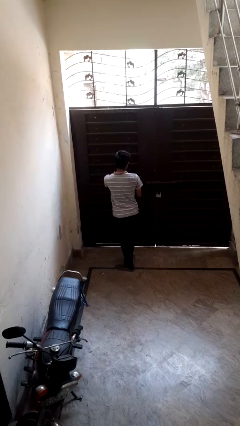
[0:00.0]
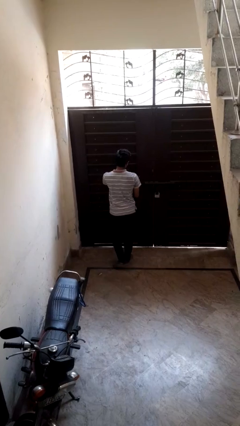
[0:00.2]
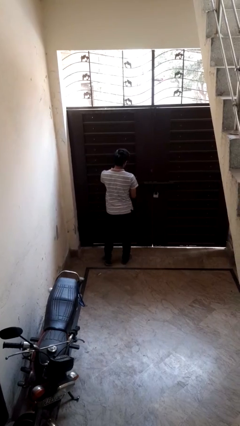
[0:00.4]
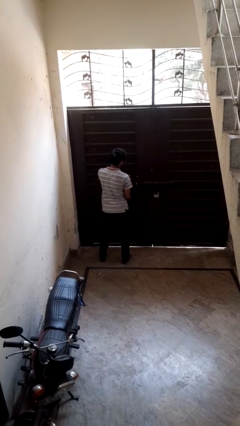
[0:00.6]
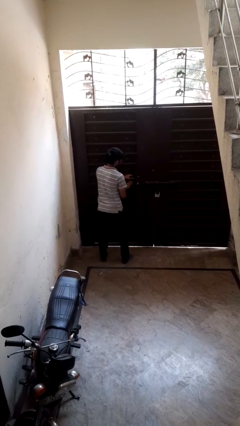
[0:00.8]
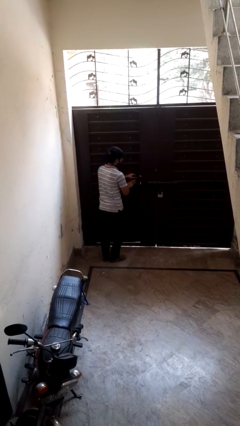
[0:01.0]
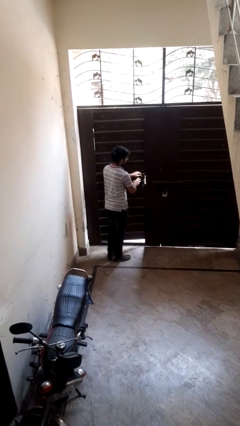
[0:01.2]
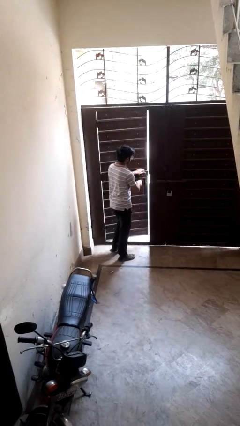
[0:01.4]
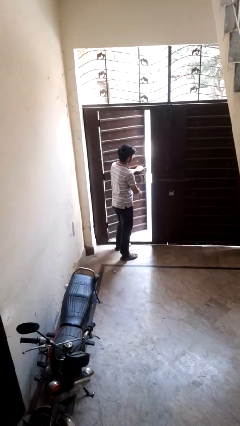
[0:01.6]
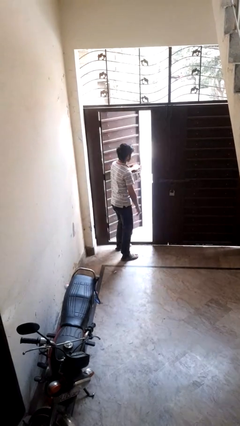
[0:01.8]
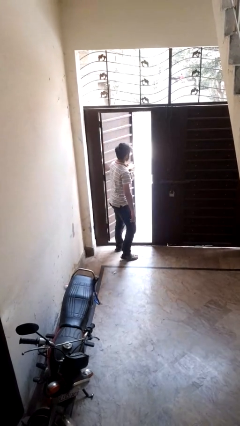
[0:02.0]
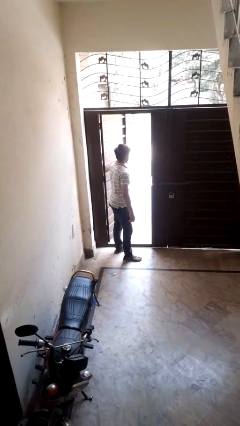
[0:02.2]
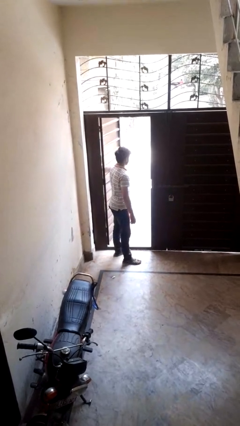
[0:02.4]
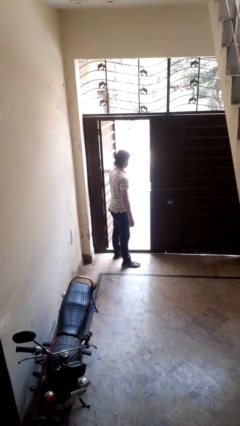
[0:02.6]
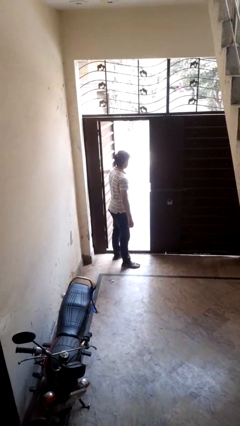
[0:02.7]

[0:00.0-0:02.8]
person opens facility door

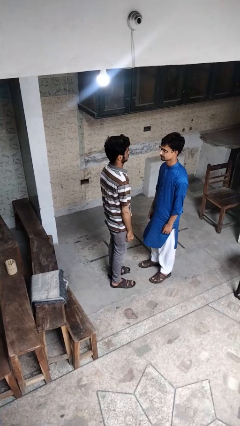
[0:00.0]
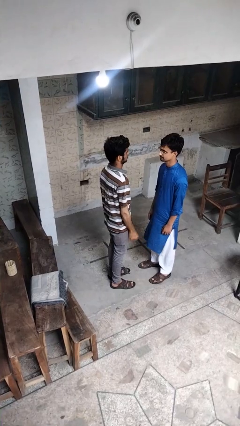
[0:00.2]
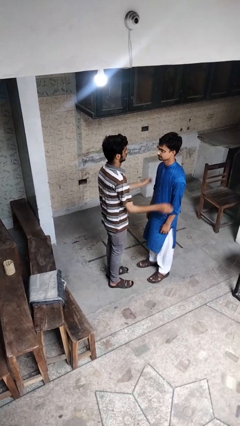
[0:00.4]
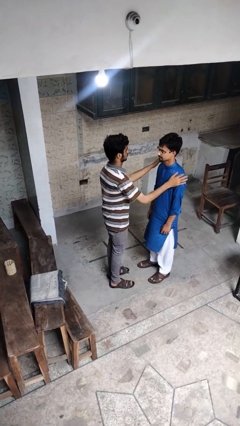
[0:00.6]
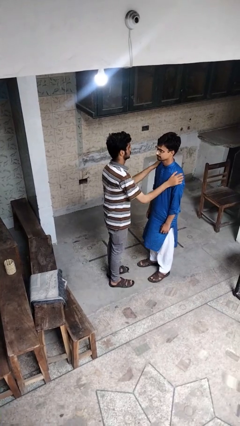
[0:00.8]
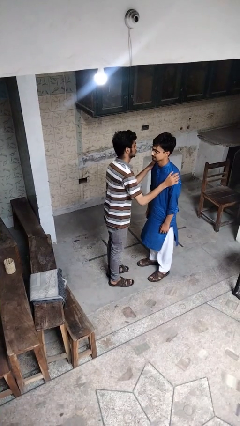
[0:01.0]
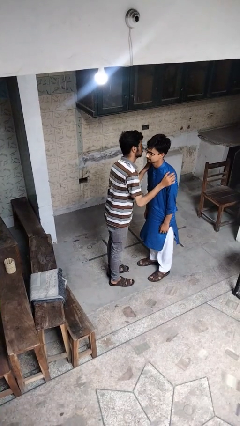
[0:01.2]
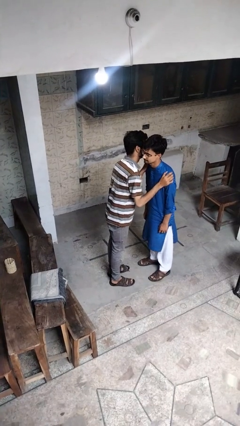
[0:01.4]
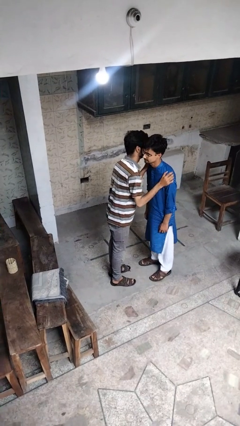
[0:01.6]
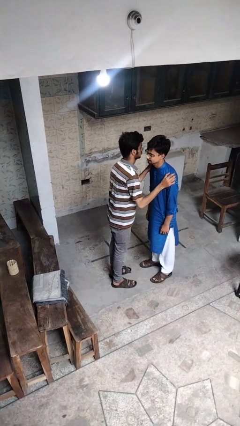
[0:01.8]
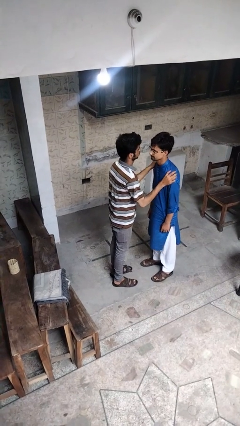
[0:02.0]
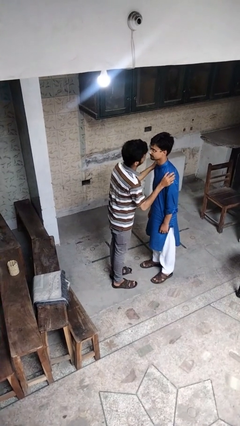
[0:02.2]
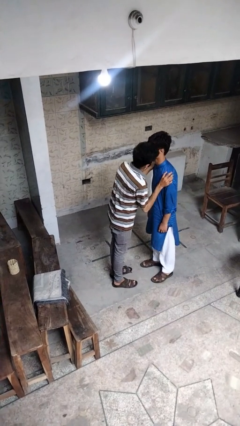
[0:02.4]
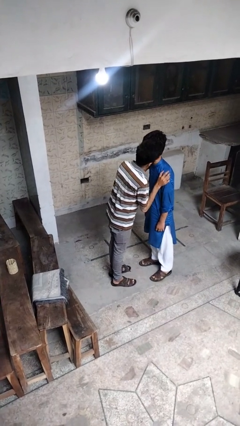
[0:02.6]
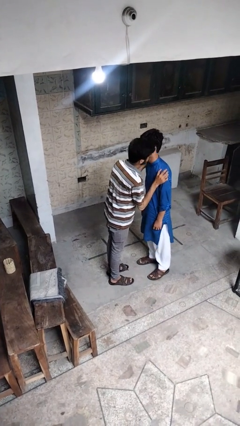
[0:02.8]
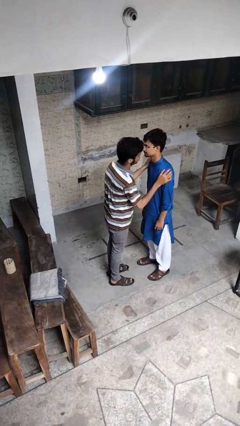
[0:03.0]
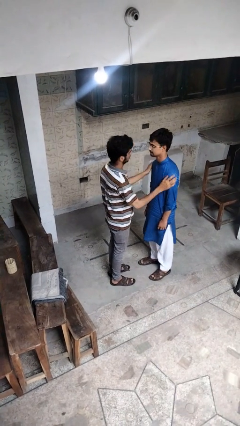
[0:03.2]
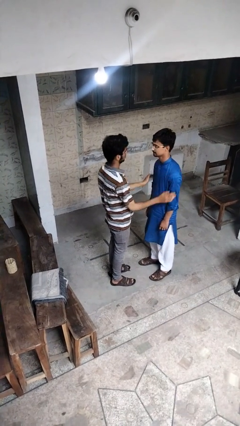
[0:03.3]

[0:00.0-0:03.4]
person kisses cheek of person

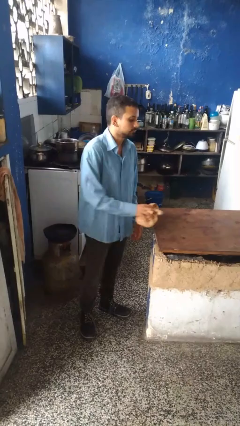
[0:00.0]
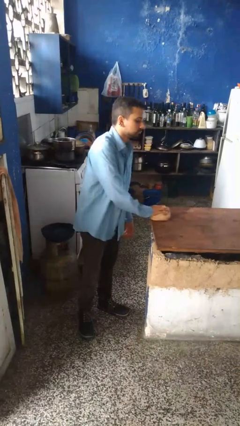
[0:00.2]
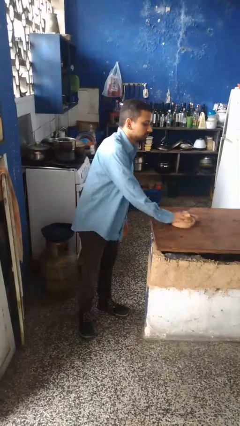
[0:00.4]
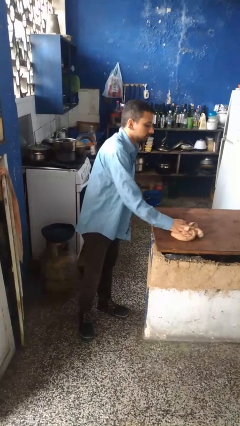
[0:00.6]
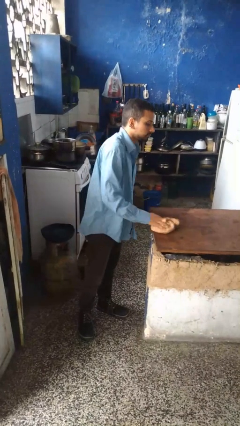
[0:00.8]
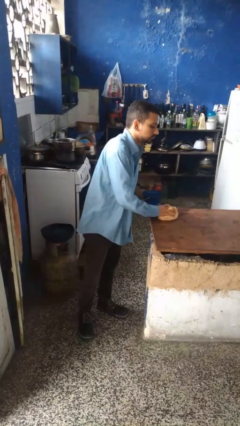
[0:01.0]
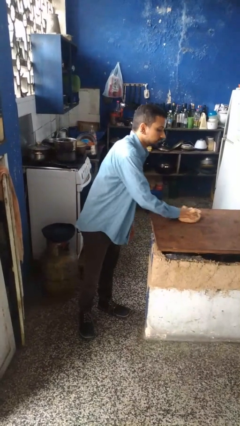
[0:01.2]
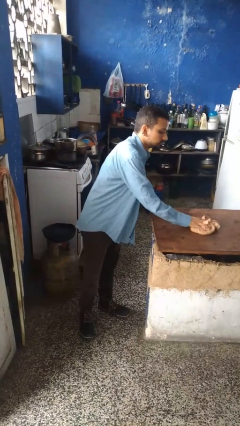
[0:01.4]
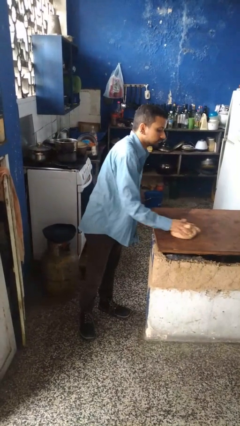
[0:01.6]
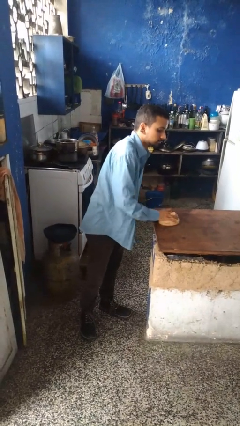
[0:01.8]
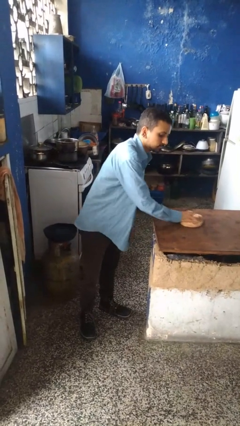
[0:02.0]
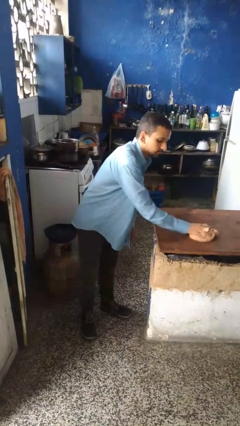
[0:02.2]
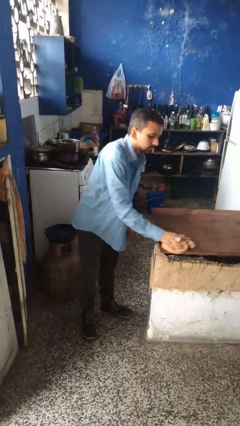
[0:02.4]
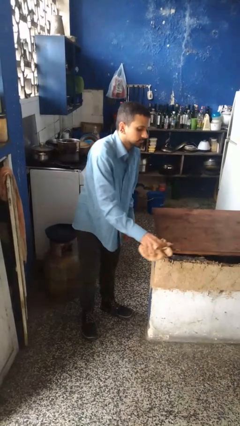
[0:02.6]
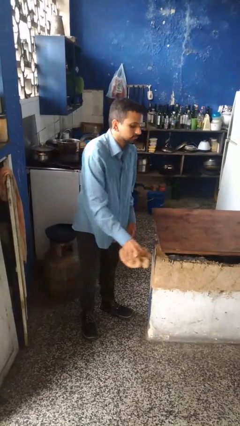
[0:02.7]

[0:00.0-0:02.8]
person cleans table with rag

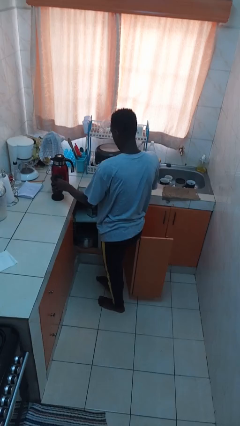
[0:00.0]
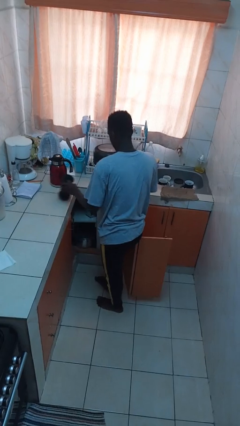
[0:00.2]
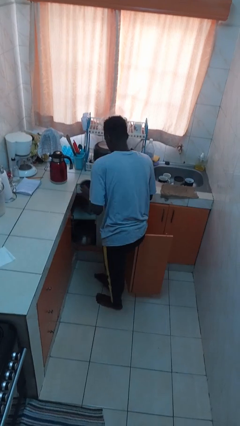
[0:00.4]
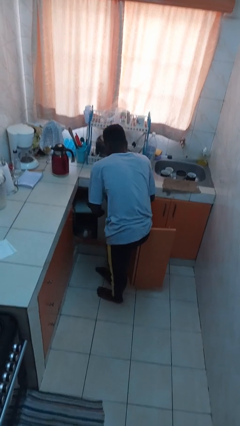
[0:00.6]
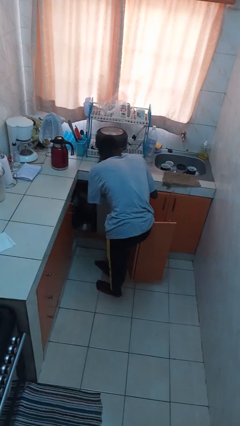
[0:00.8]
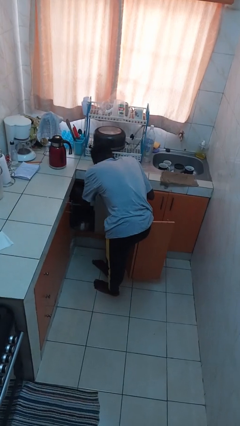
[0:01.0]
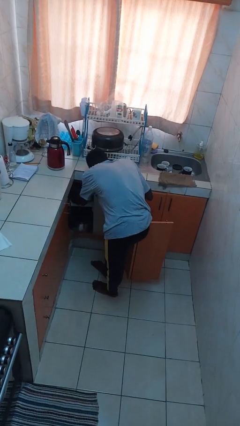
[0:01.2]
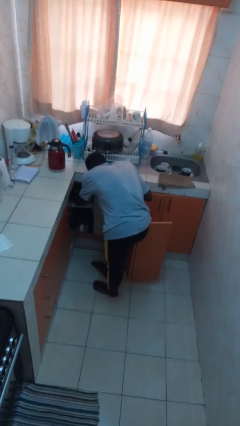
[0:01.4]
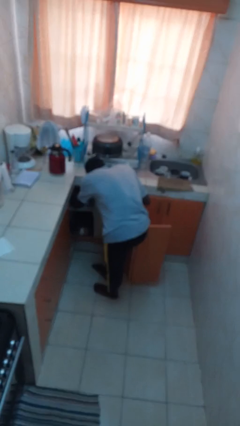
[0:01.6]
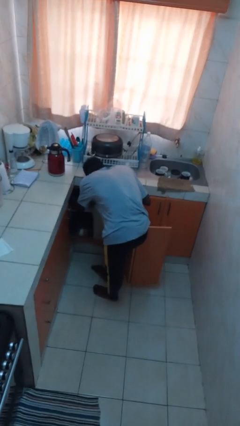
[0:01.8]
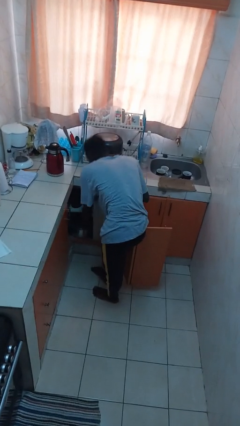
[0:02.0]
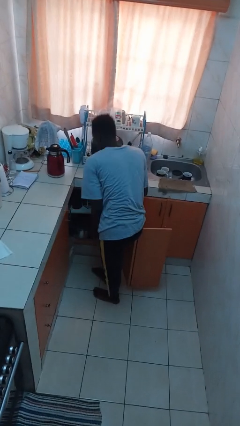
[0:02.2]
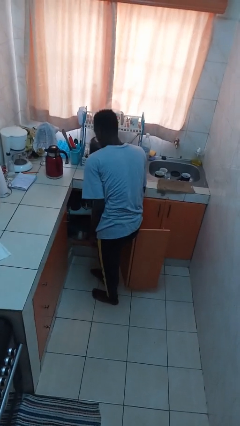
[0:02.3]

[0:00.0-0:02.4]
person puts object in cabinet

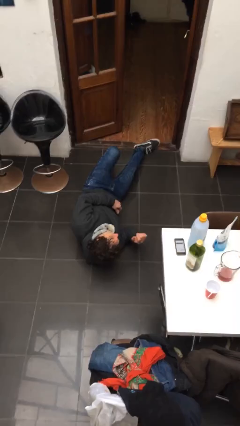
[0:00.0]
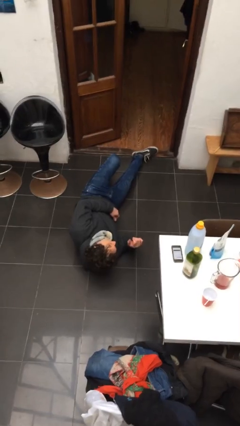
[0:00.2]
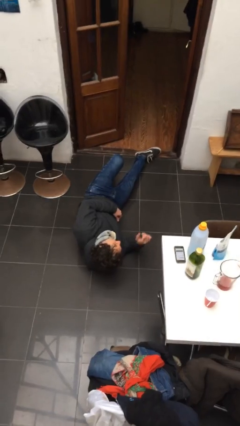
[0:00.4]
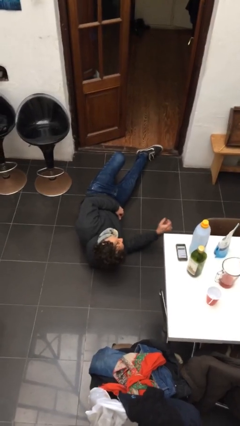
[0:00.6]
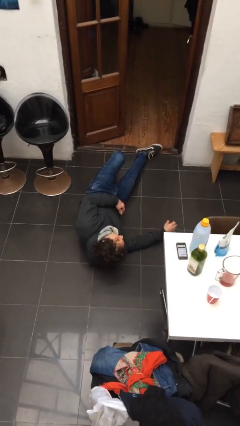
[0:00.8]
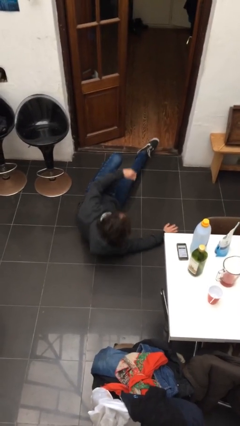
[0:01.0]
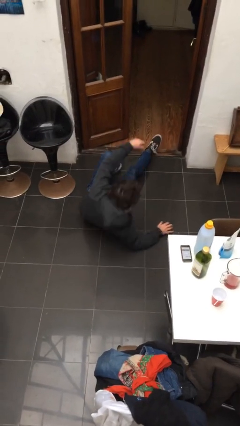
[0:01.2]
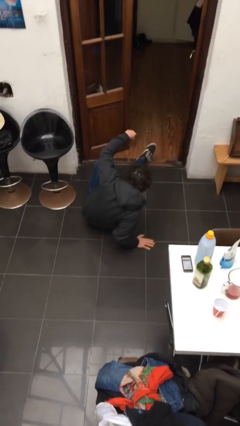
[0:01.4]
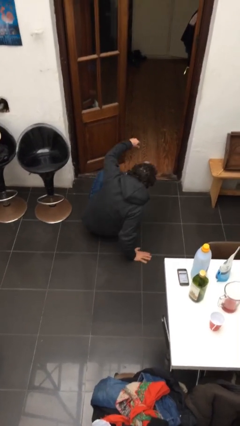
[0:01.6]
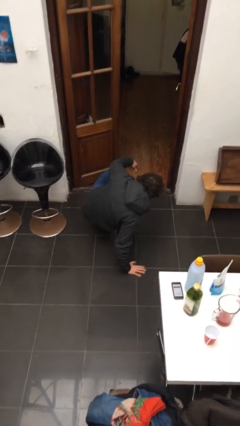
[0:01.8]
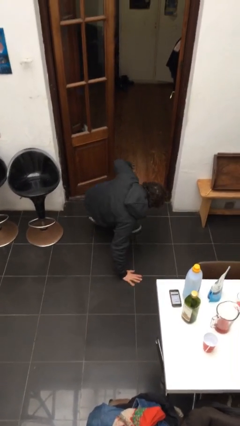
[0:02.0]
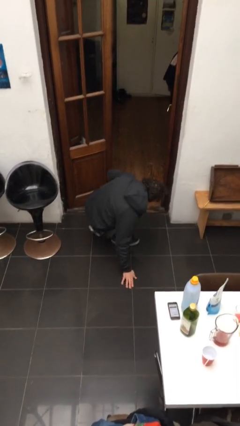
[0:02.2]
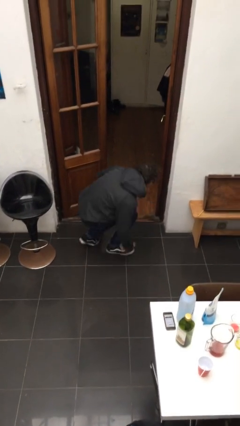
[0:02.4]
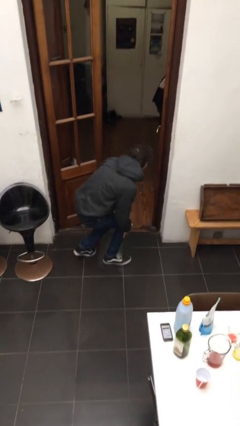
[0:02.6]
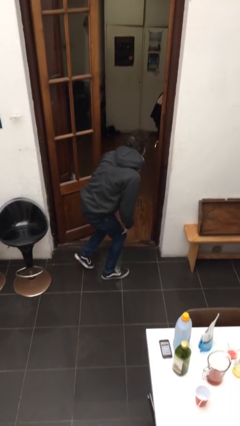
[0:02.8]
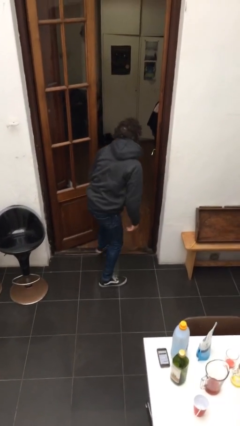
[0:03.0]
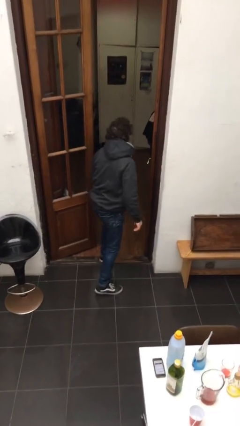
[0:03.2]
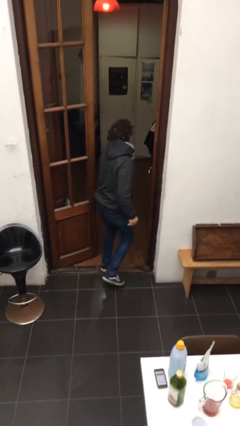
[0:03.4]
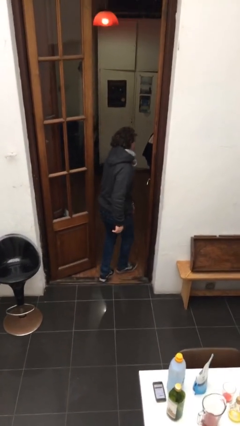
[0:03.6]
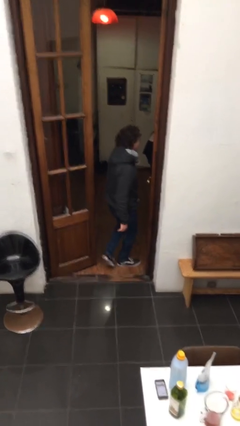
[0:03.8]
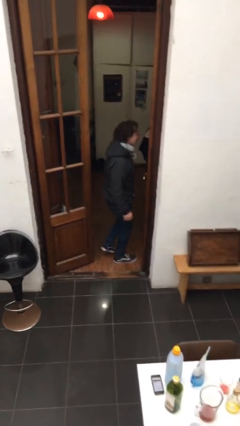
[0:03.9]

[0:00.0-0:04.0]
person stands up from floor

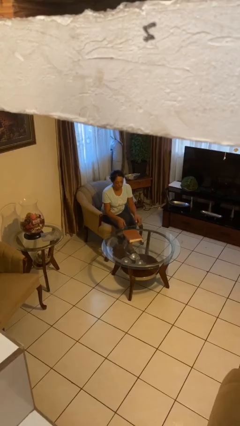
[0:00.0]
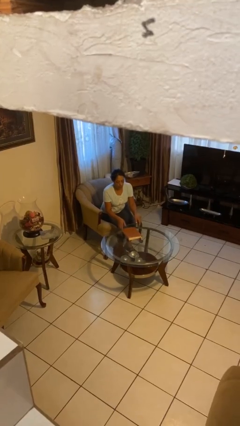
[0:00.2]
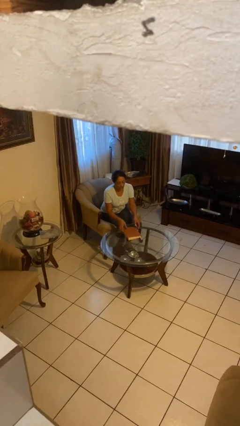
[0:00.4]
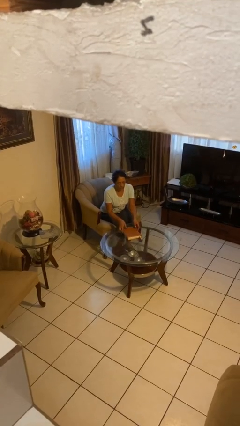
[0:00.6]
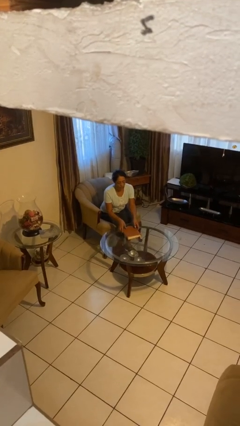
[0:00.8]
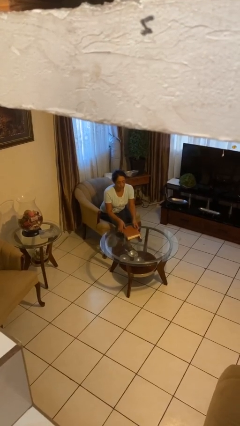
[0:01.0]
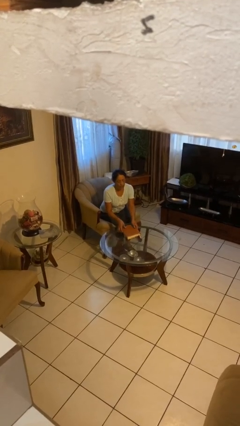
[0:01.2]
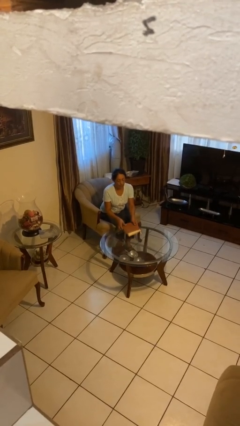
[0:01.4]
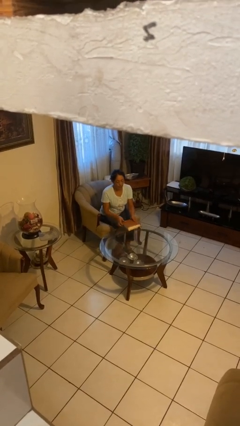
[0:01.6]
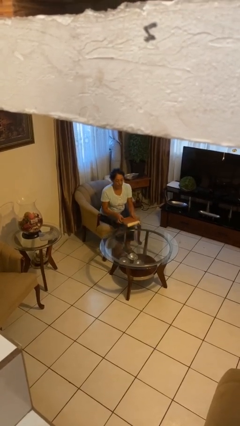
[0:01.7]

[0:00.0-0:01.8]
person picks up object from table

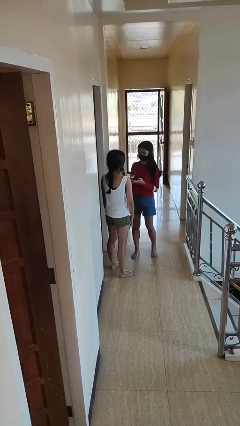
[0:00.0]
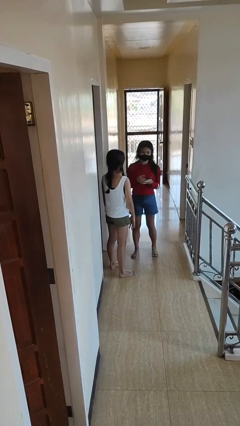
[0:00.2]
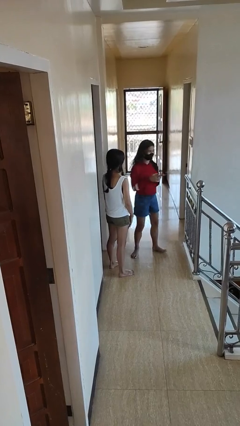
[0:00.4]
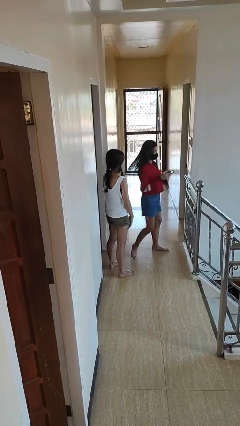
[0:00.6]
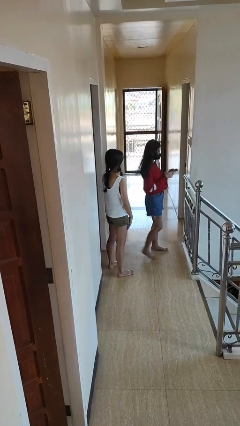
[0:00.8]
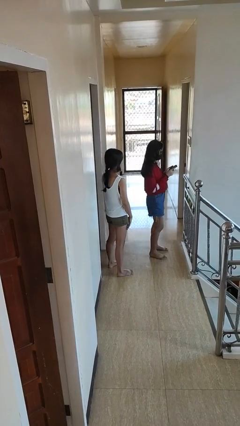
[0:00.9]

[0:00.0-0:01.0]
person spins person around
